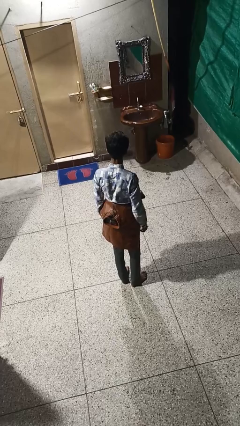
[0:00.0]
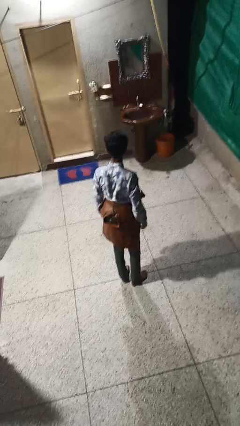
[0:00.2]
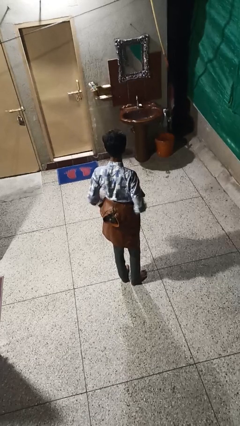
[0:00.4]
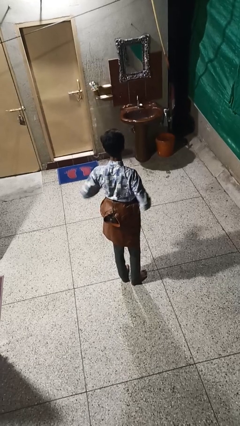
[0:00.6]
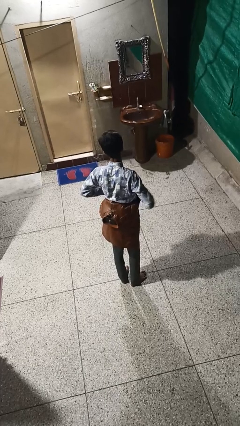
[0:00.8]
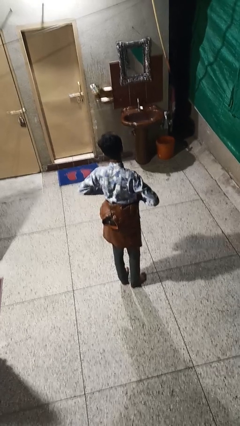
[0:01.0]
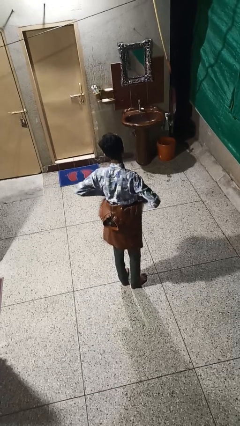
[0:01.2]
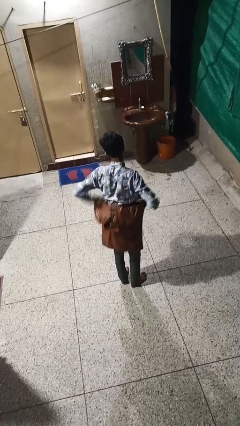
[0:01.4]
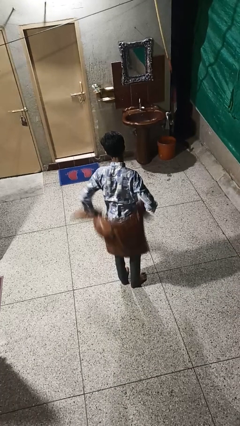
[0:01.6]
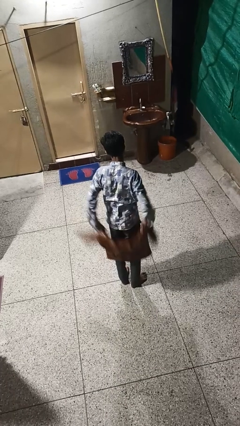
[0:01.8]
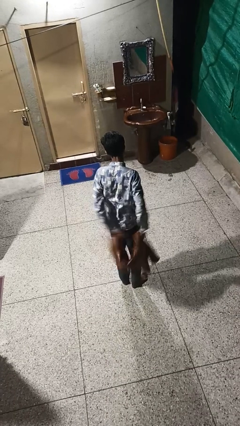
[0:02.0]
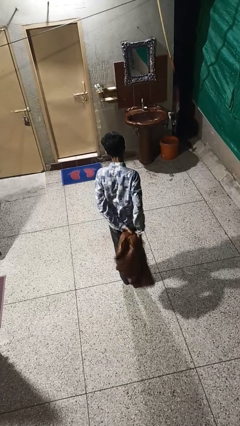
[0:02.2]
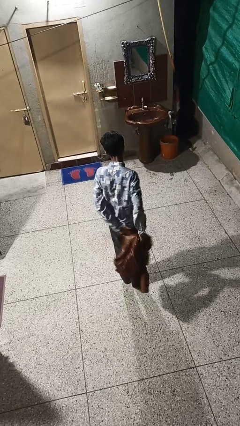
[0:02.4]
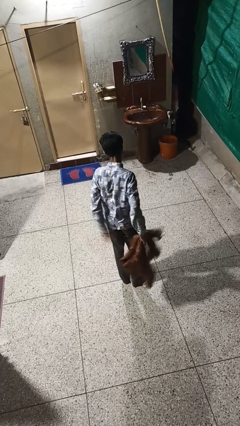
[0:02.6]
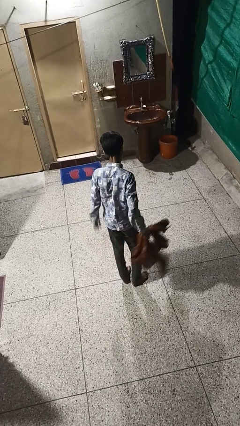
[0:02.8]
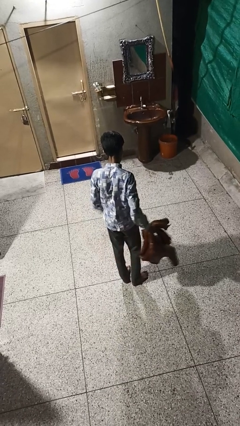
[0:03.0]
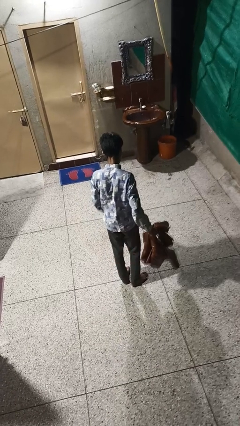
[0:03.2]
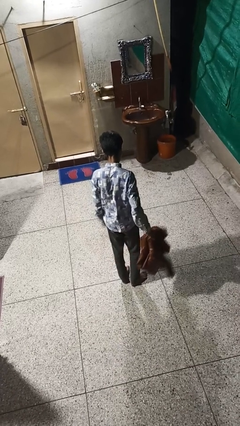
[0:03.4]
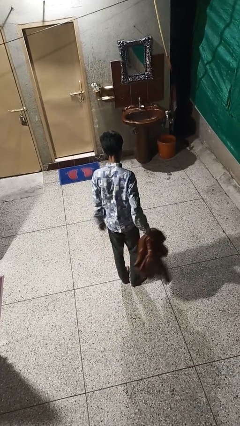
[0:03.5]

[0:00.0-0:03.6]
person unties jacket around waist

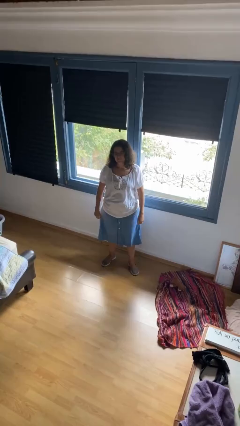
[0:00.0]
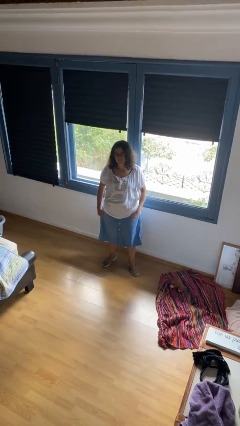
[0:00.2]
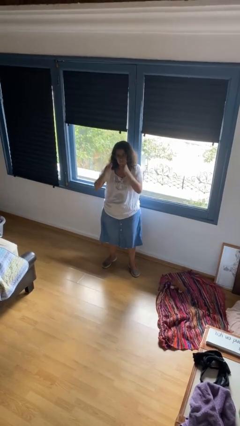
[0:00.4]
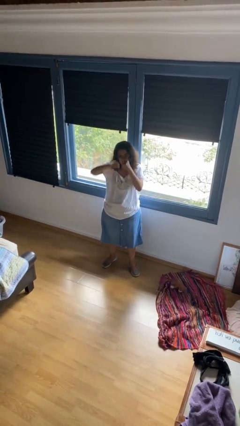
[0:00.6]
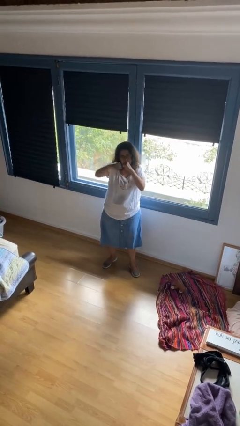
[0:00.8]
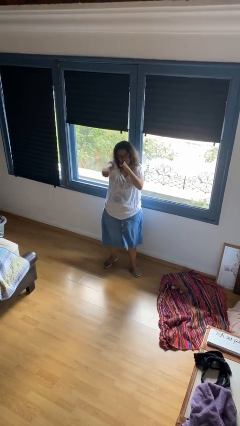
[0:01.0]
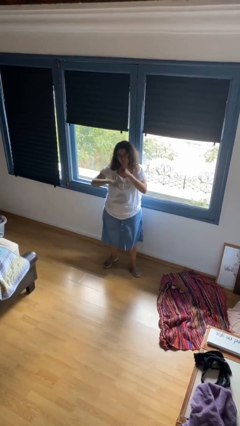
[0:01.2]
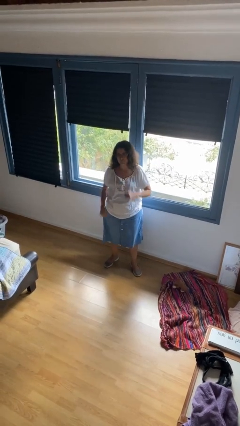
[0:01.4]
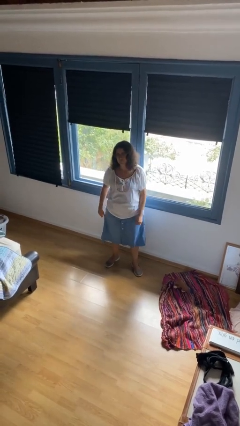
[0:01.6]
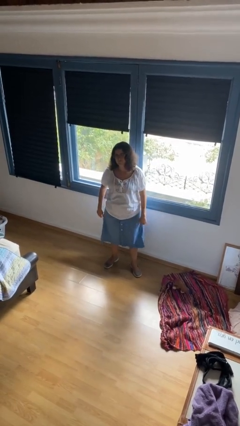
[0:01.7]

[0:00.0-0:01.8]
person punches

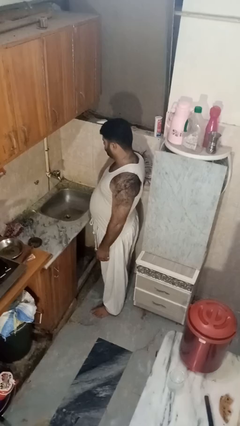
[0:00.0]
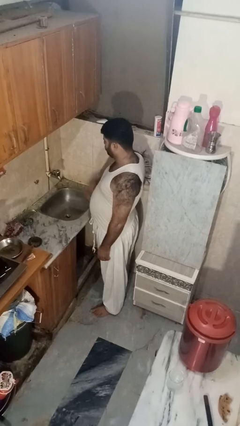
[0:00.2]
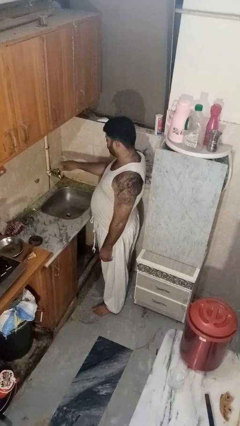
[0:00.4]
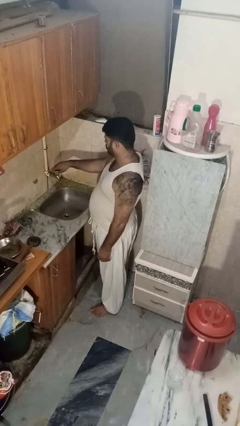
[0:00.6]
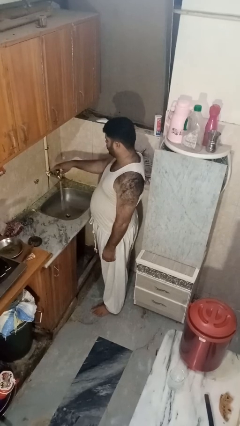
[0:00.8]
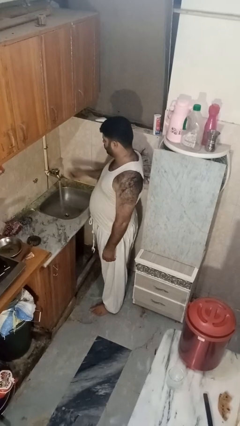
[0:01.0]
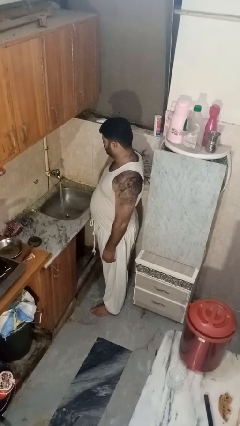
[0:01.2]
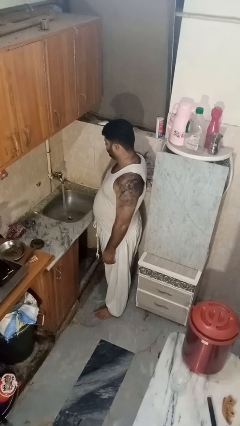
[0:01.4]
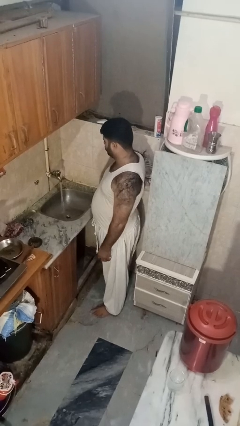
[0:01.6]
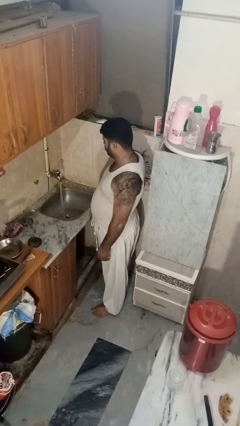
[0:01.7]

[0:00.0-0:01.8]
person turns on faucet

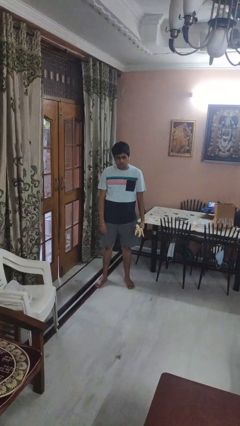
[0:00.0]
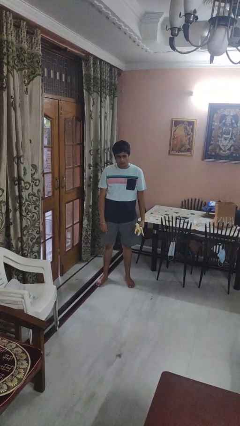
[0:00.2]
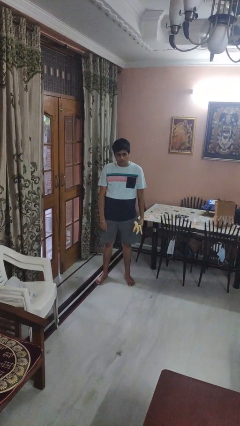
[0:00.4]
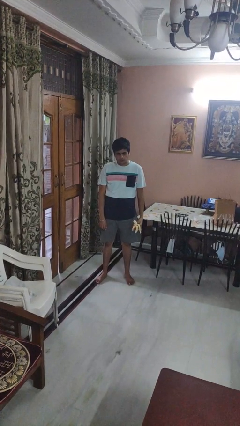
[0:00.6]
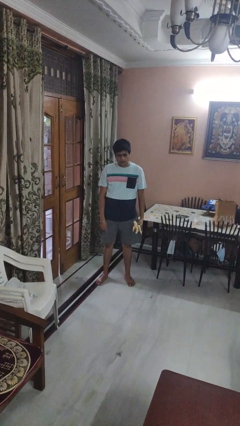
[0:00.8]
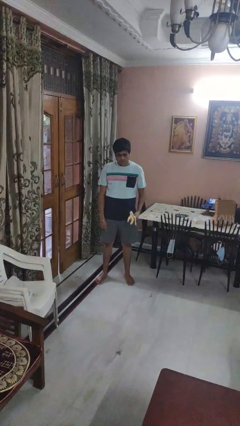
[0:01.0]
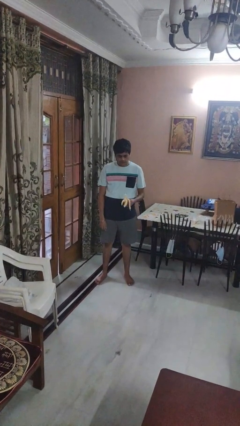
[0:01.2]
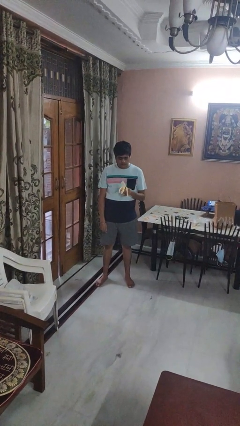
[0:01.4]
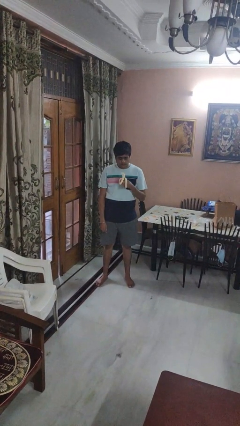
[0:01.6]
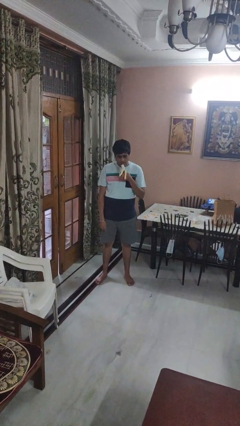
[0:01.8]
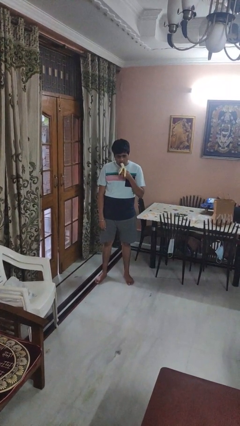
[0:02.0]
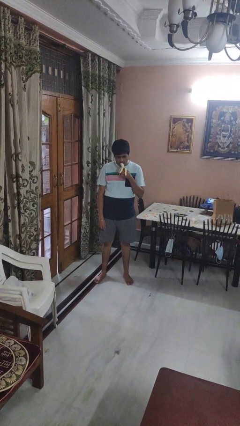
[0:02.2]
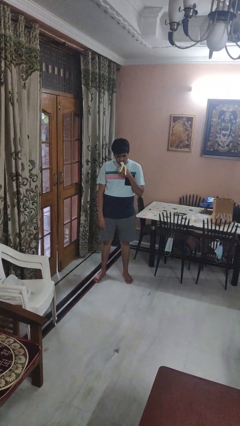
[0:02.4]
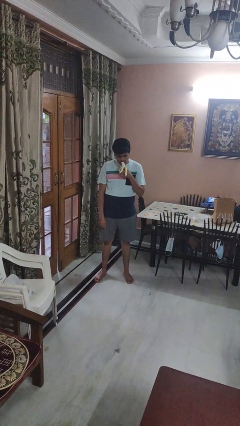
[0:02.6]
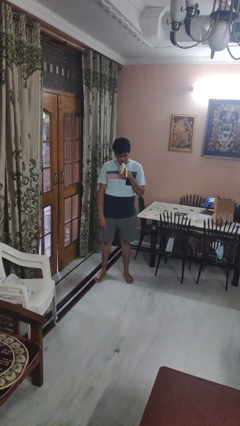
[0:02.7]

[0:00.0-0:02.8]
person eats banana

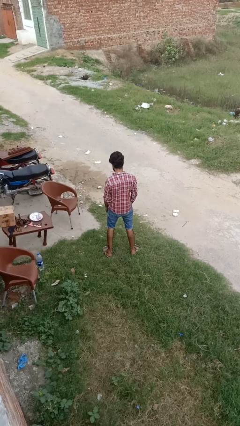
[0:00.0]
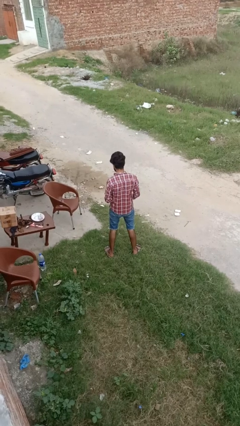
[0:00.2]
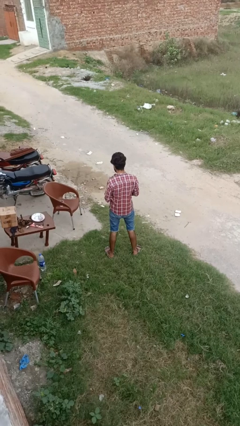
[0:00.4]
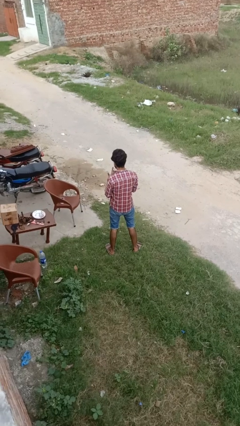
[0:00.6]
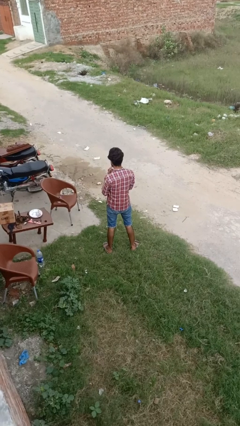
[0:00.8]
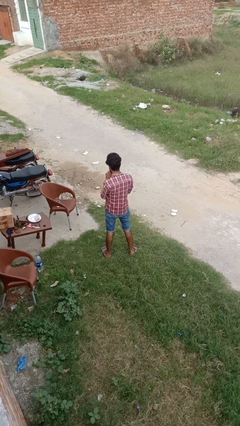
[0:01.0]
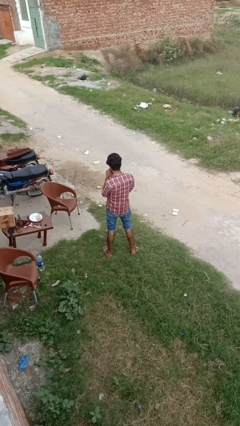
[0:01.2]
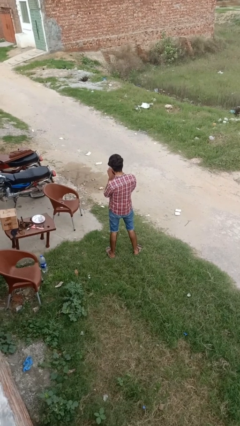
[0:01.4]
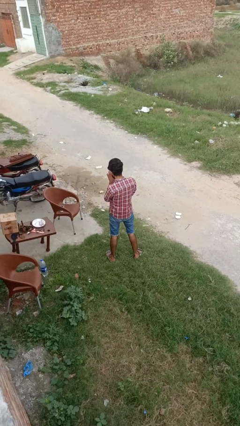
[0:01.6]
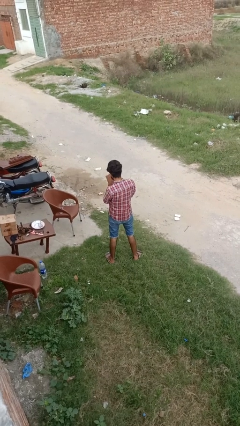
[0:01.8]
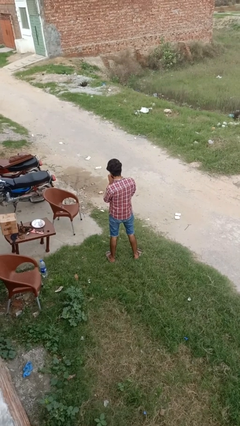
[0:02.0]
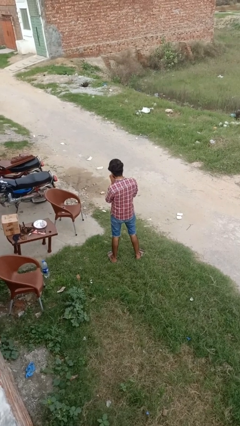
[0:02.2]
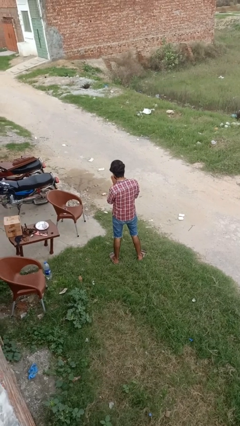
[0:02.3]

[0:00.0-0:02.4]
person puts on ring

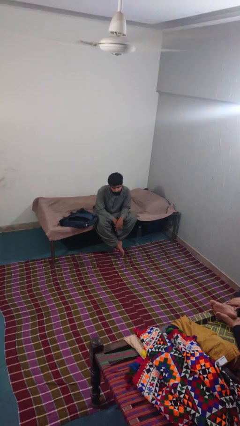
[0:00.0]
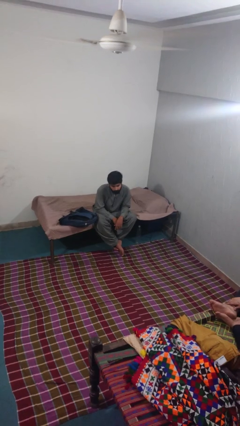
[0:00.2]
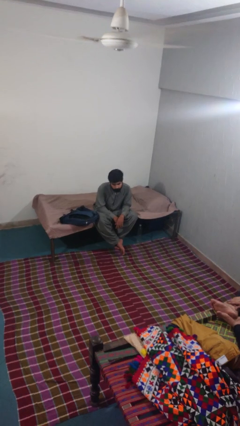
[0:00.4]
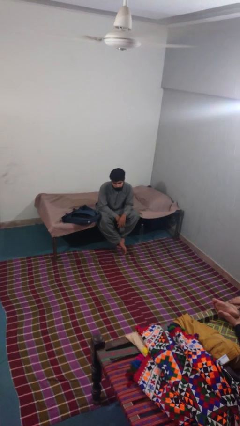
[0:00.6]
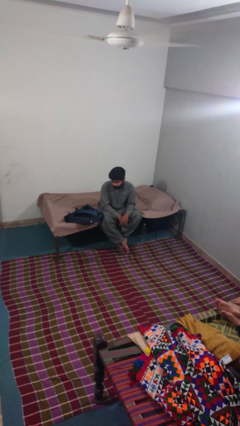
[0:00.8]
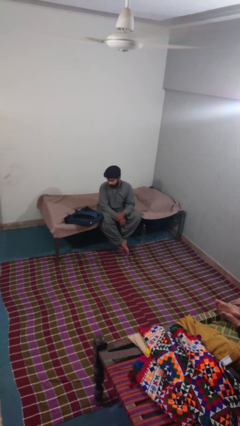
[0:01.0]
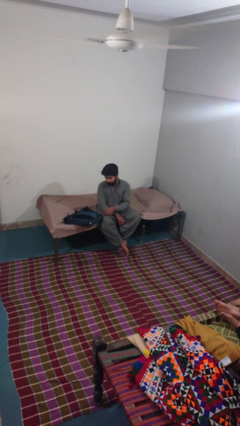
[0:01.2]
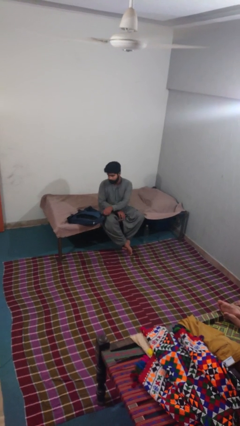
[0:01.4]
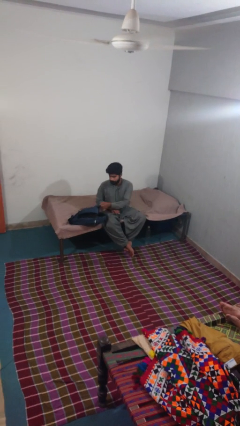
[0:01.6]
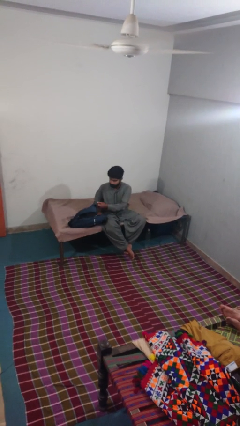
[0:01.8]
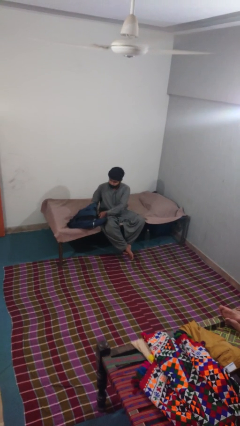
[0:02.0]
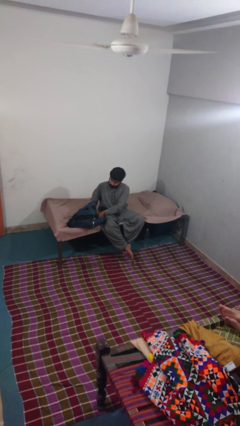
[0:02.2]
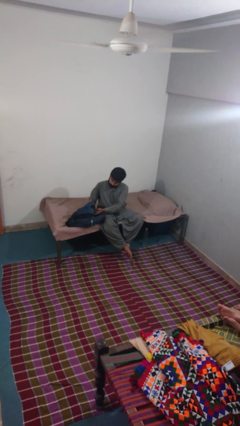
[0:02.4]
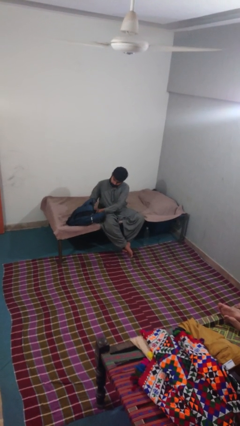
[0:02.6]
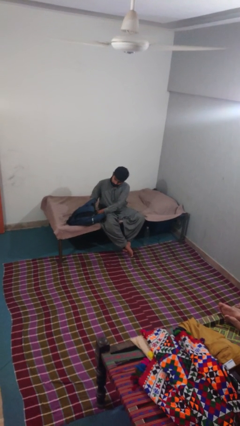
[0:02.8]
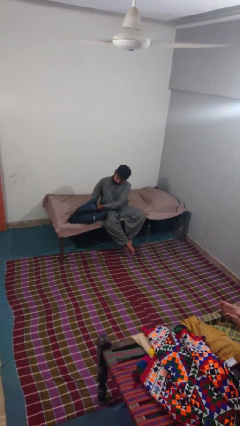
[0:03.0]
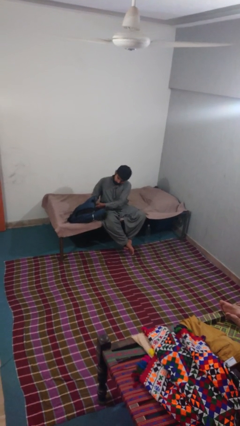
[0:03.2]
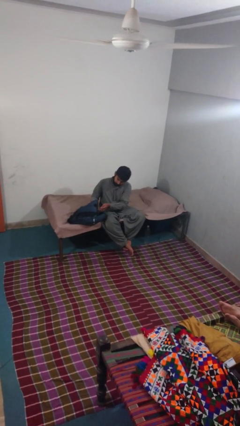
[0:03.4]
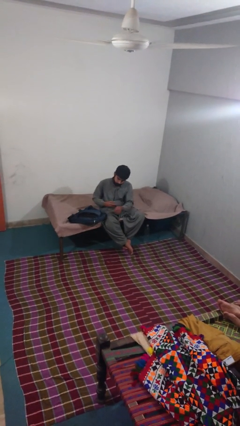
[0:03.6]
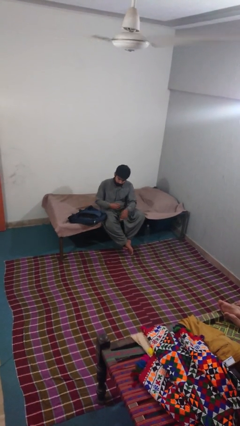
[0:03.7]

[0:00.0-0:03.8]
person searches in bag

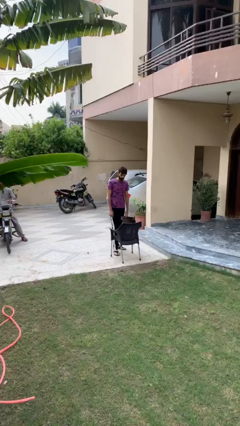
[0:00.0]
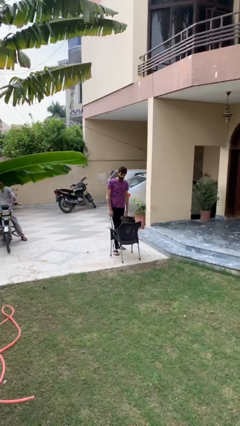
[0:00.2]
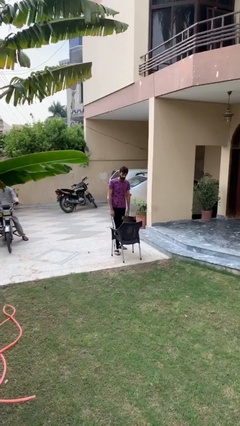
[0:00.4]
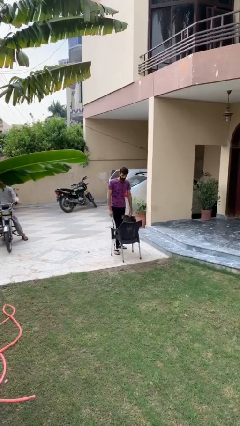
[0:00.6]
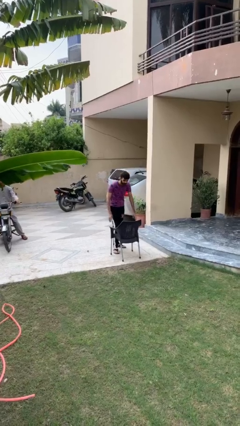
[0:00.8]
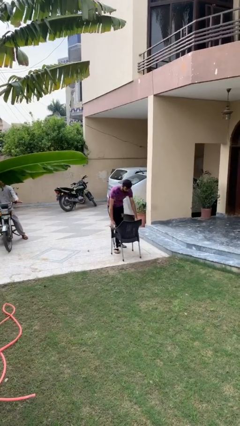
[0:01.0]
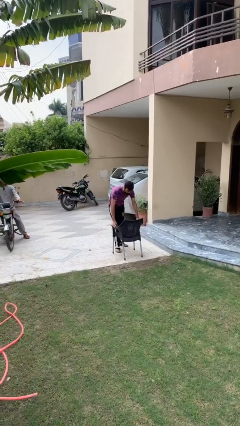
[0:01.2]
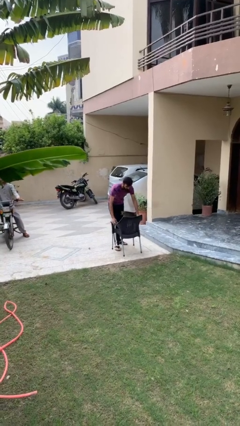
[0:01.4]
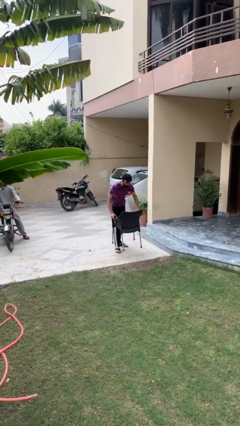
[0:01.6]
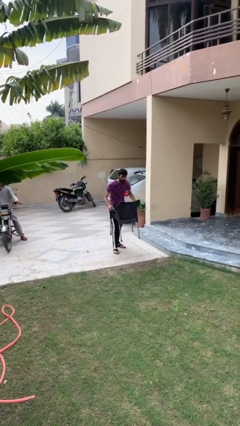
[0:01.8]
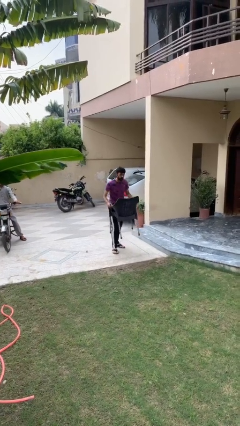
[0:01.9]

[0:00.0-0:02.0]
person picks up object from floor
